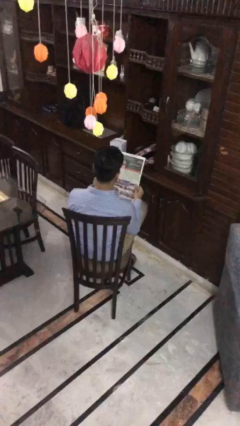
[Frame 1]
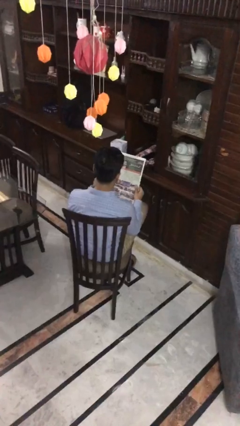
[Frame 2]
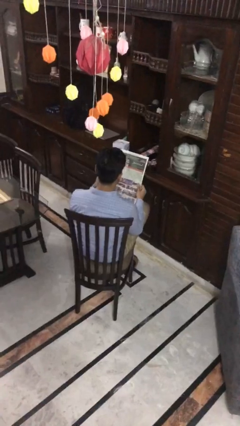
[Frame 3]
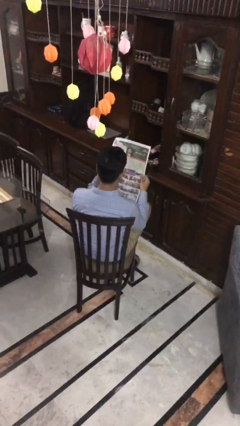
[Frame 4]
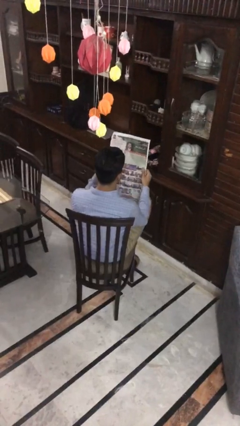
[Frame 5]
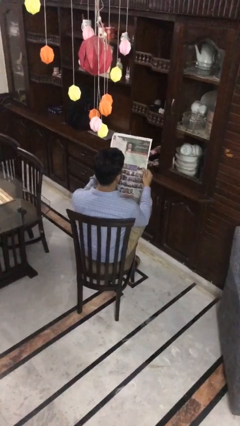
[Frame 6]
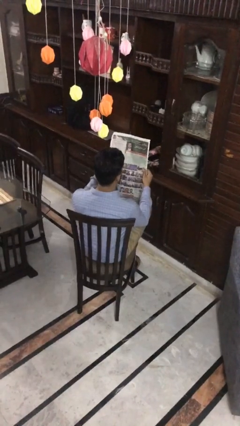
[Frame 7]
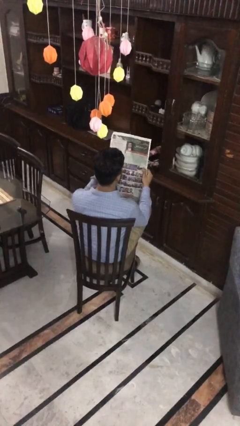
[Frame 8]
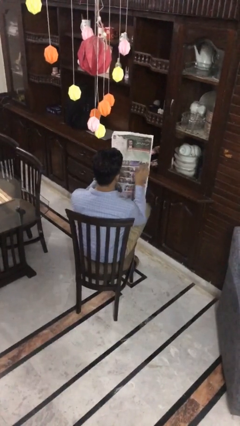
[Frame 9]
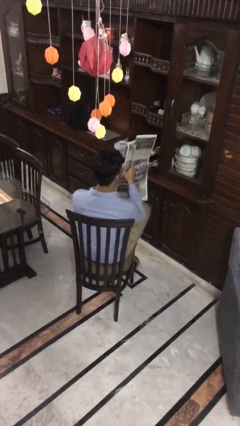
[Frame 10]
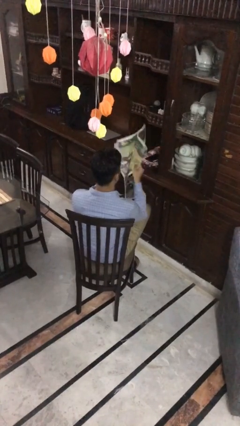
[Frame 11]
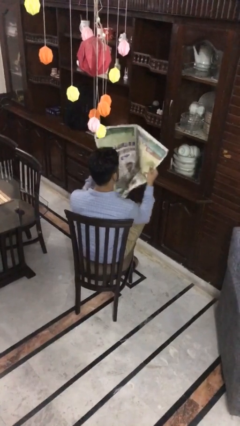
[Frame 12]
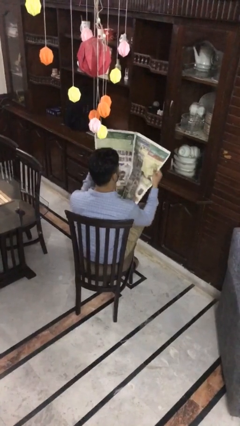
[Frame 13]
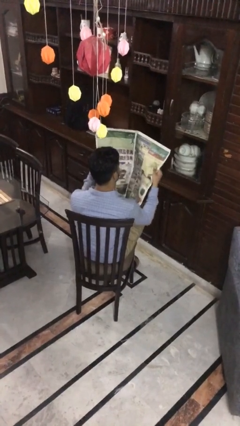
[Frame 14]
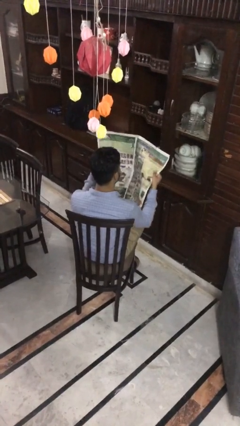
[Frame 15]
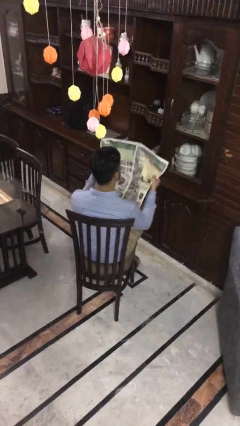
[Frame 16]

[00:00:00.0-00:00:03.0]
person reads newspaper

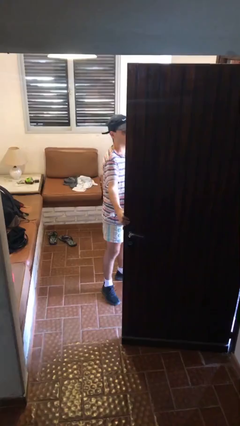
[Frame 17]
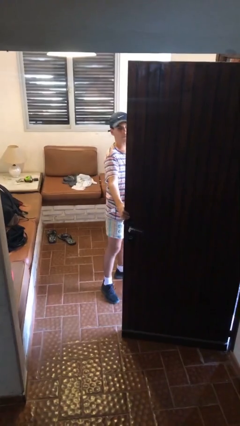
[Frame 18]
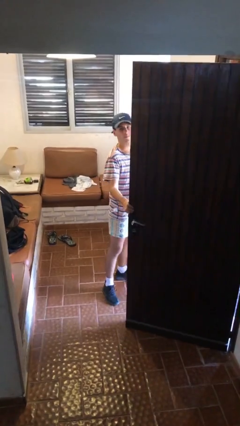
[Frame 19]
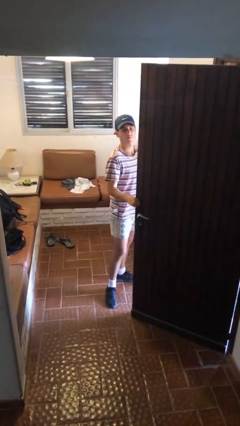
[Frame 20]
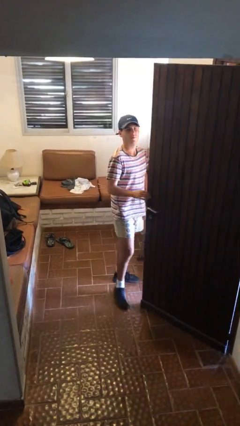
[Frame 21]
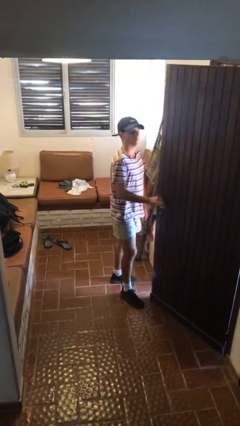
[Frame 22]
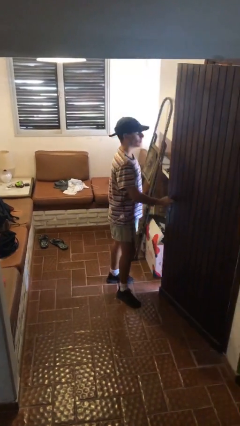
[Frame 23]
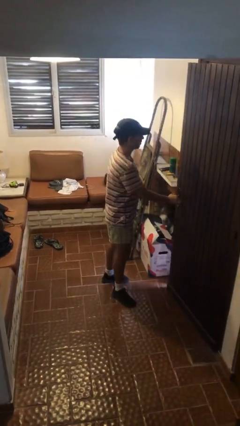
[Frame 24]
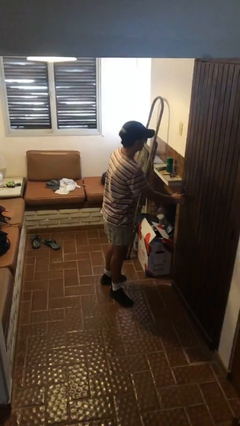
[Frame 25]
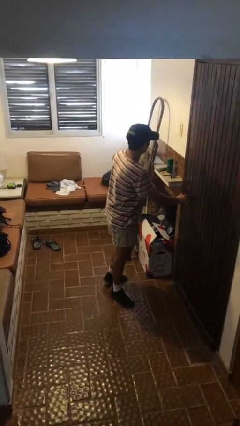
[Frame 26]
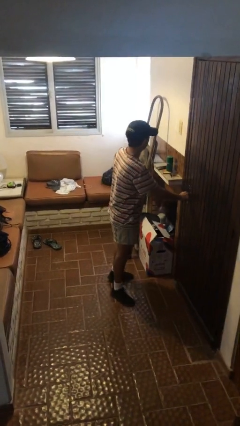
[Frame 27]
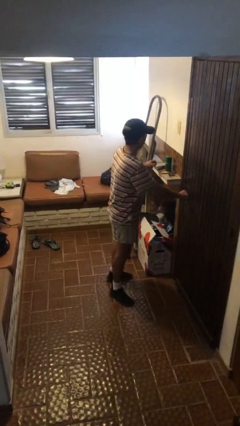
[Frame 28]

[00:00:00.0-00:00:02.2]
person closes facility door

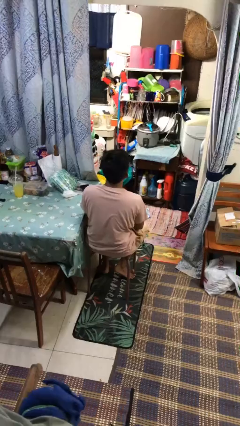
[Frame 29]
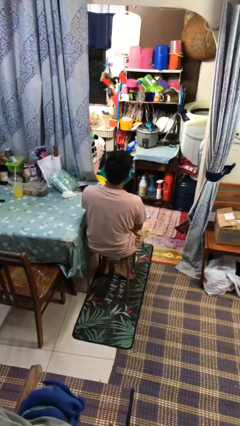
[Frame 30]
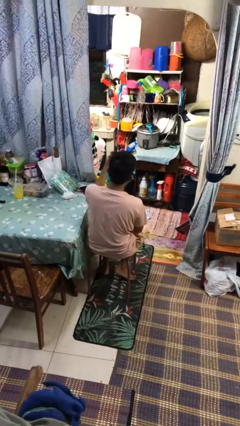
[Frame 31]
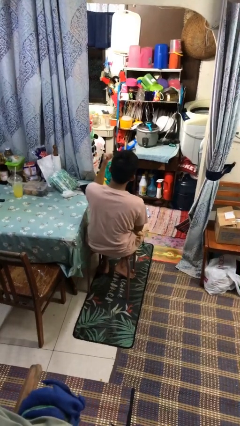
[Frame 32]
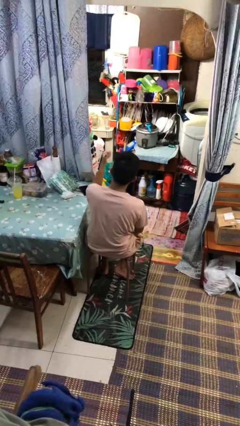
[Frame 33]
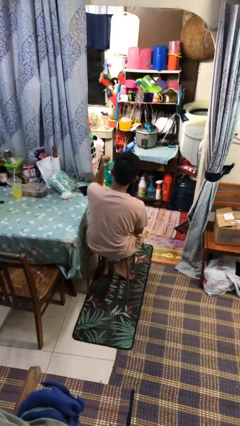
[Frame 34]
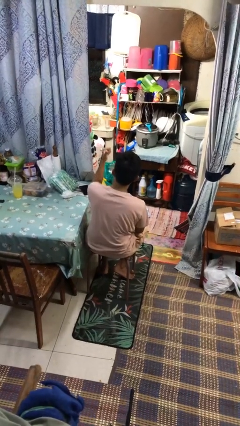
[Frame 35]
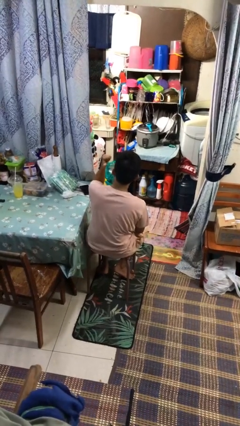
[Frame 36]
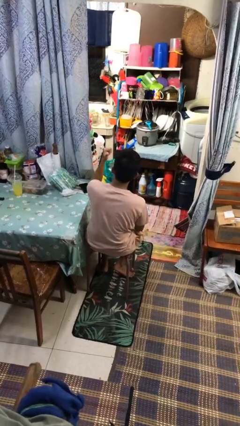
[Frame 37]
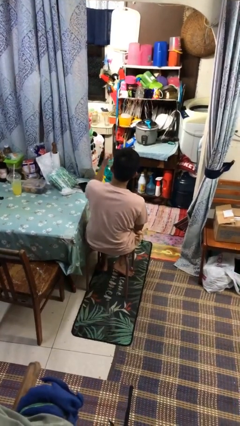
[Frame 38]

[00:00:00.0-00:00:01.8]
person gestures behind me

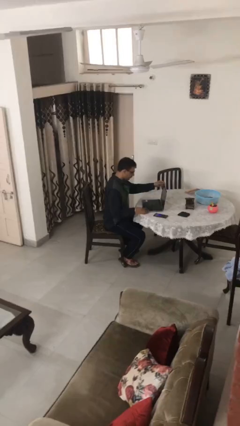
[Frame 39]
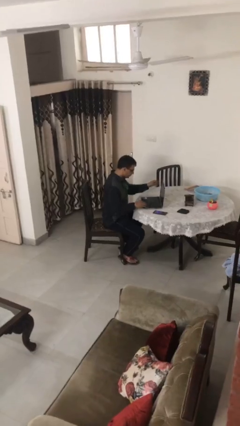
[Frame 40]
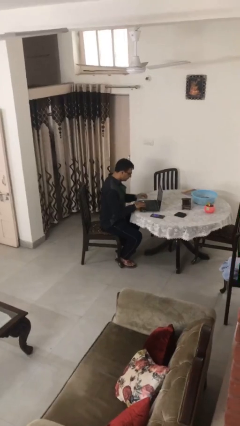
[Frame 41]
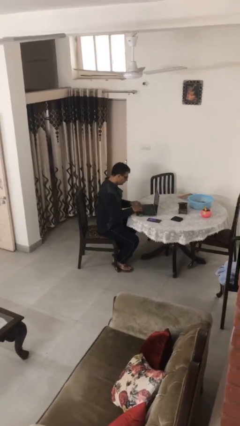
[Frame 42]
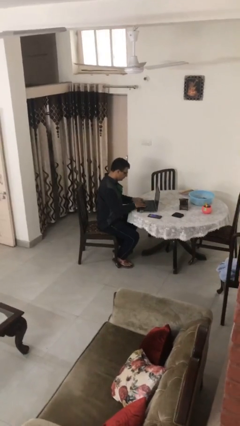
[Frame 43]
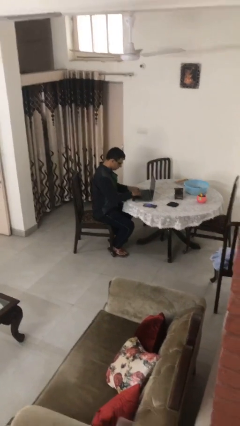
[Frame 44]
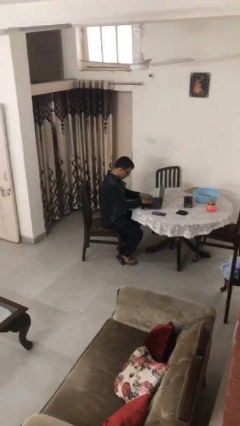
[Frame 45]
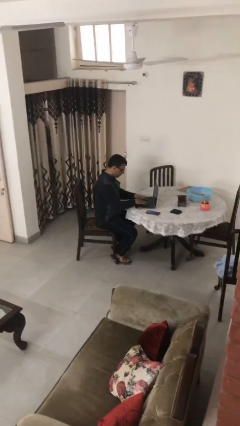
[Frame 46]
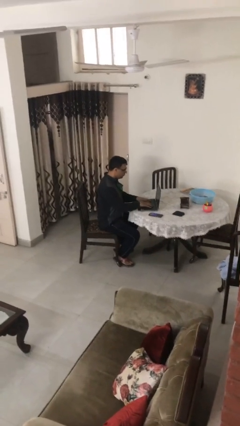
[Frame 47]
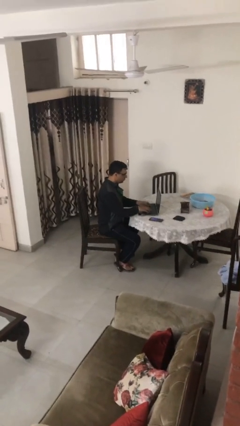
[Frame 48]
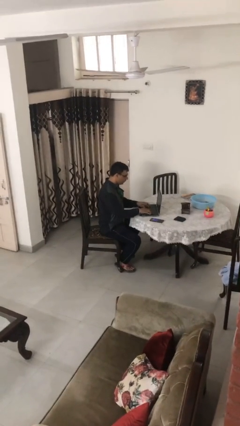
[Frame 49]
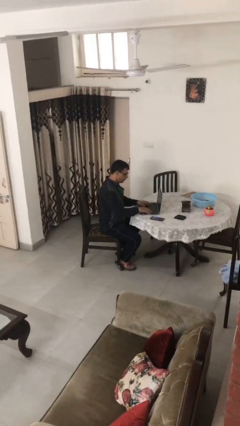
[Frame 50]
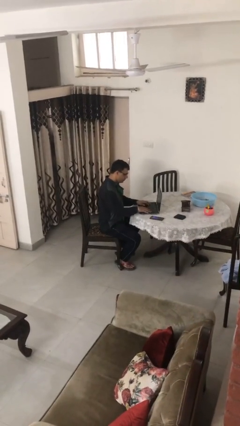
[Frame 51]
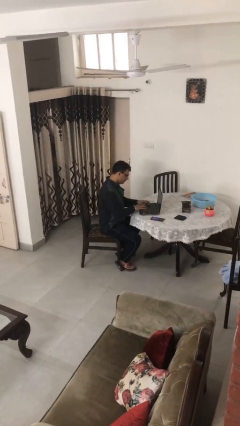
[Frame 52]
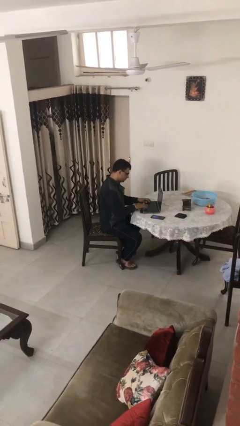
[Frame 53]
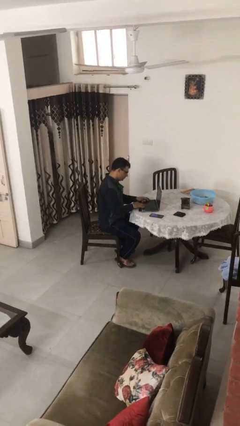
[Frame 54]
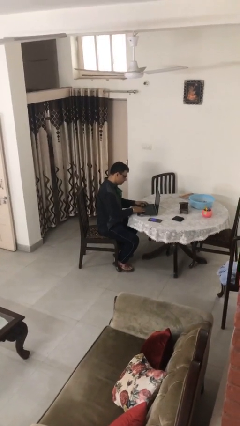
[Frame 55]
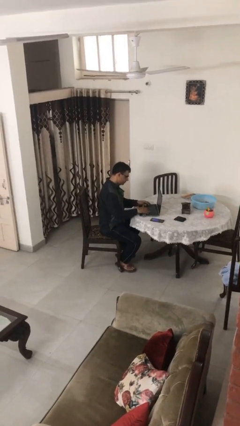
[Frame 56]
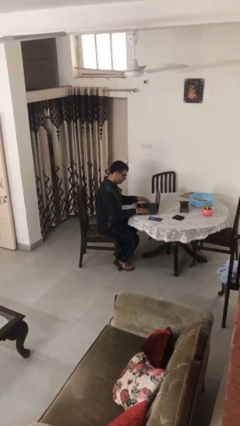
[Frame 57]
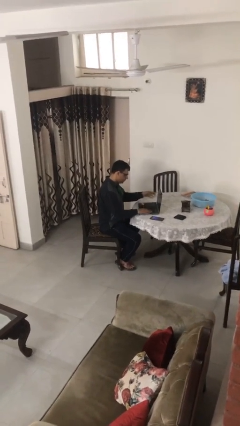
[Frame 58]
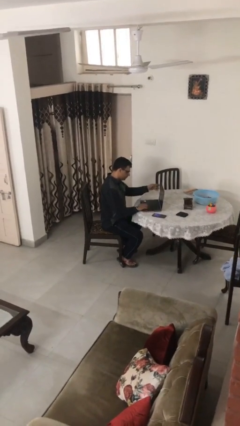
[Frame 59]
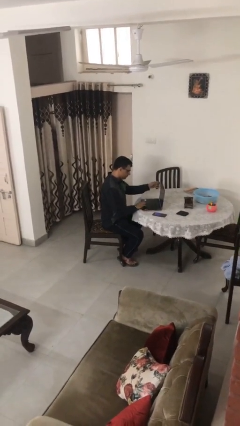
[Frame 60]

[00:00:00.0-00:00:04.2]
person interacts with laptop

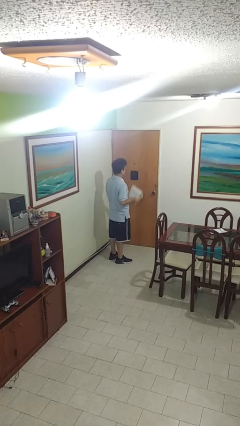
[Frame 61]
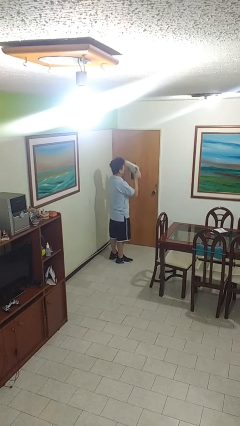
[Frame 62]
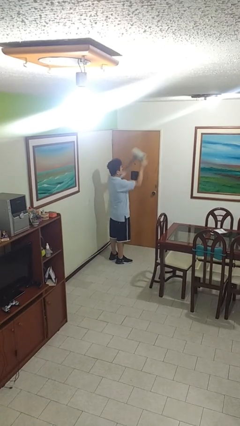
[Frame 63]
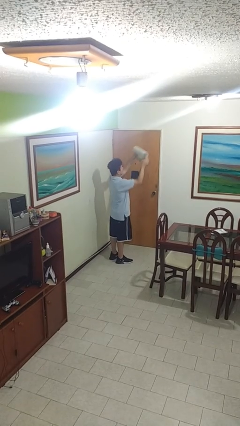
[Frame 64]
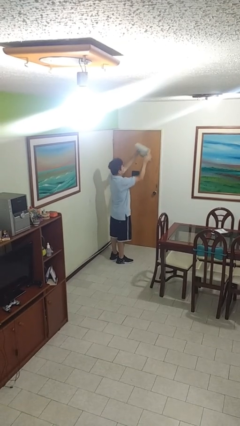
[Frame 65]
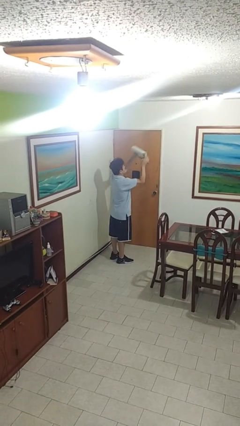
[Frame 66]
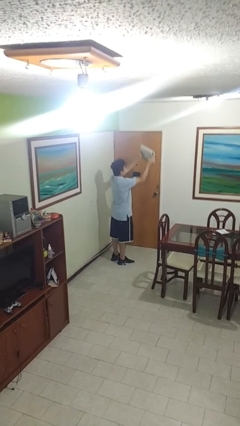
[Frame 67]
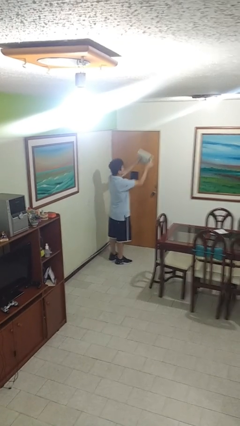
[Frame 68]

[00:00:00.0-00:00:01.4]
person holds object above head

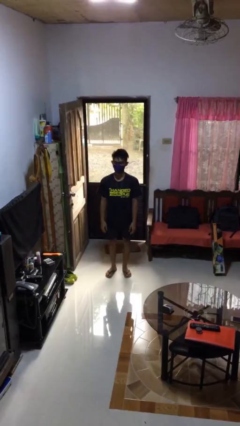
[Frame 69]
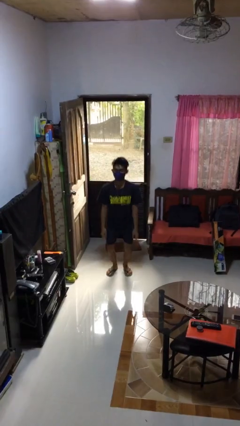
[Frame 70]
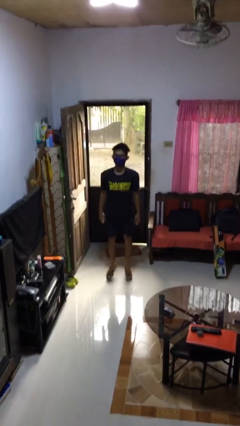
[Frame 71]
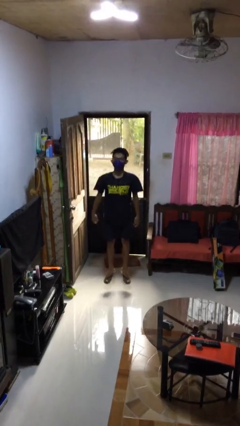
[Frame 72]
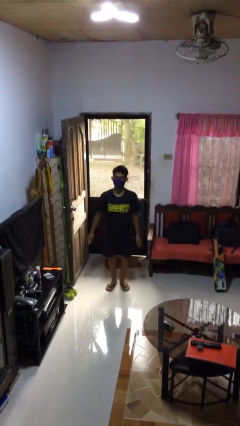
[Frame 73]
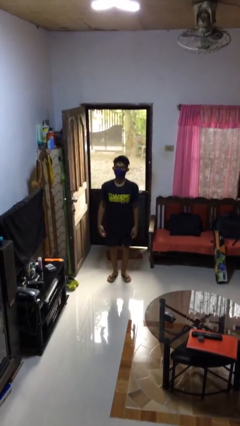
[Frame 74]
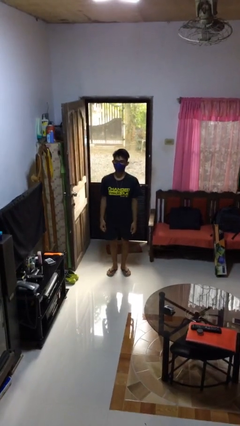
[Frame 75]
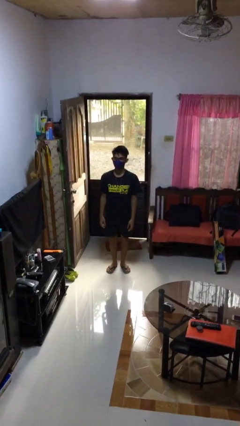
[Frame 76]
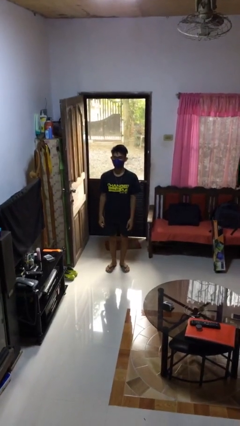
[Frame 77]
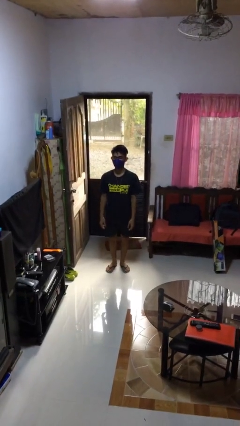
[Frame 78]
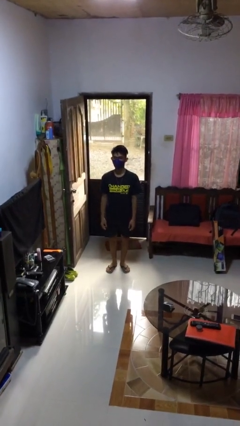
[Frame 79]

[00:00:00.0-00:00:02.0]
person jumps

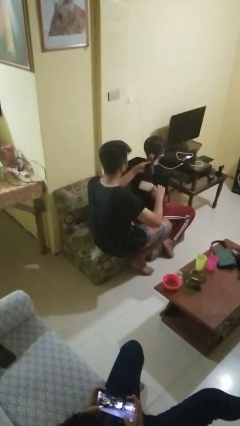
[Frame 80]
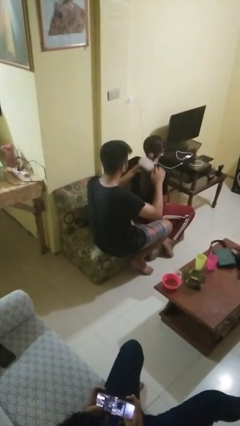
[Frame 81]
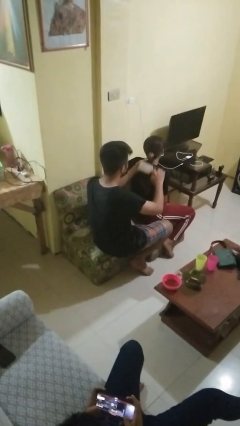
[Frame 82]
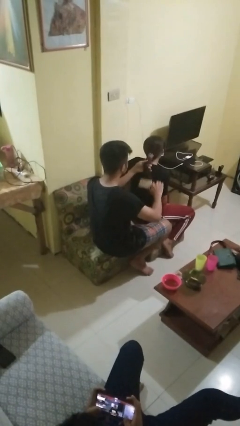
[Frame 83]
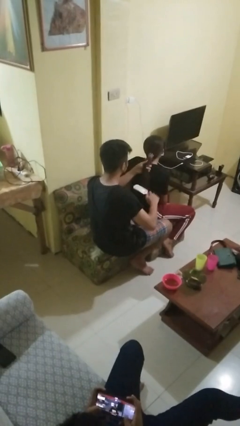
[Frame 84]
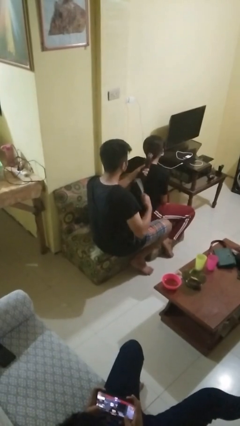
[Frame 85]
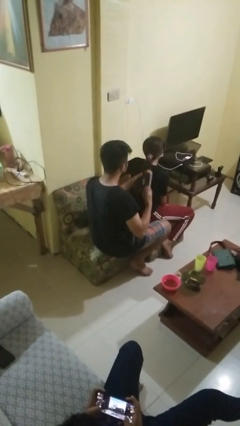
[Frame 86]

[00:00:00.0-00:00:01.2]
person brushes hair of person

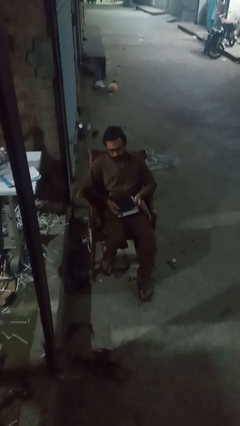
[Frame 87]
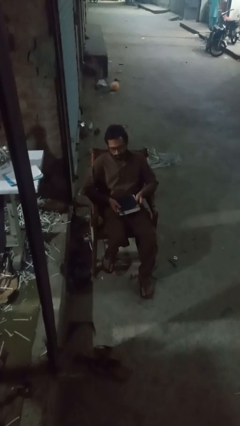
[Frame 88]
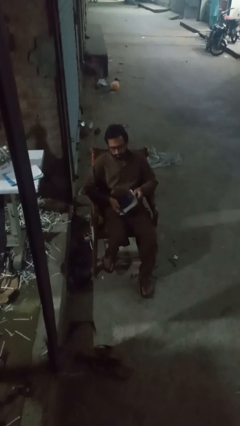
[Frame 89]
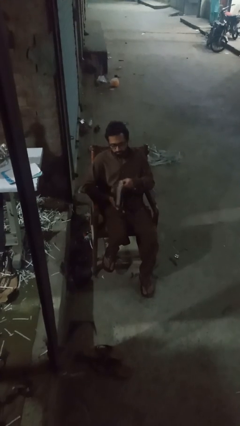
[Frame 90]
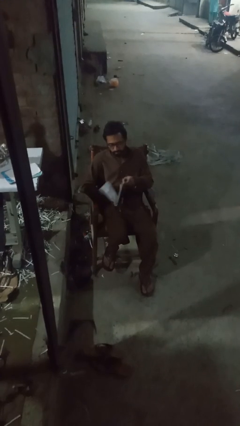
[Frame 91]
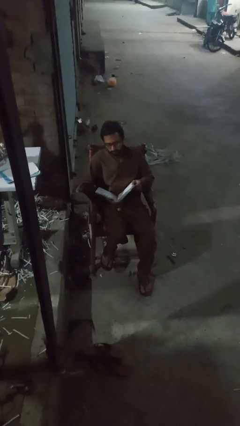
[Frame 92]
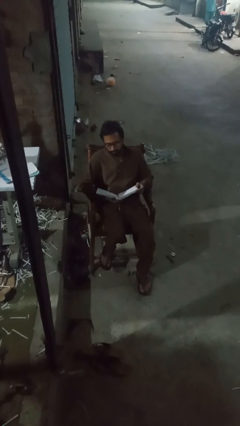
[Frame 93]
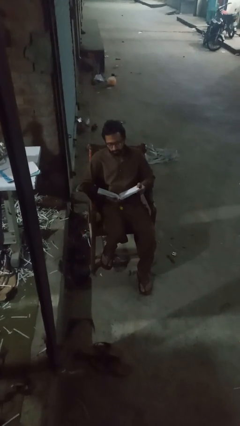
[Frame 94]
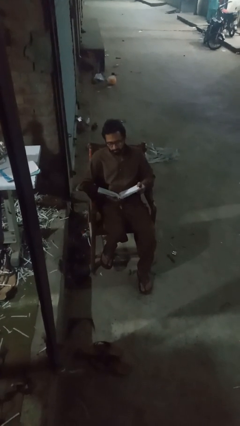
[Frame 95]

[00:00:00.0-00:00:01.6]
person reads book
